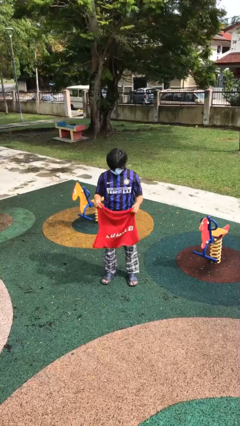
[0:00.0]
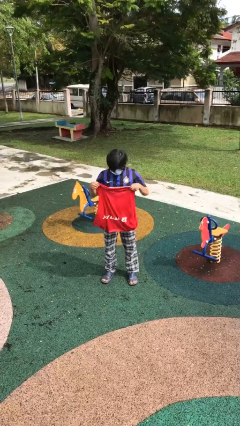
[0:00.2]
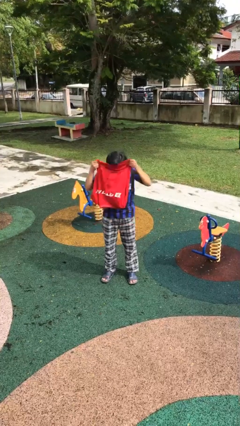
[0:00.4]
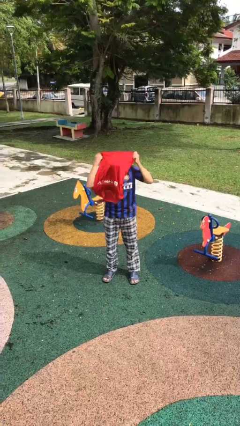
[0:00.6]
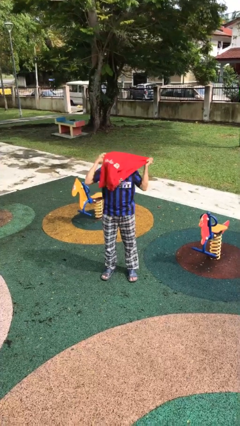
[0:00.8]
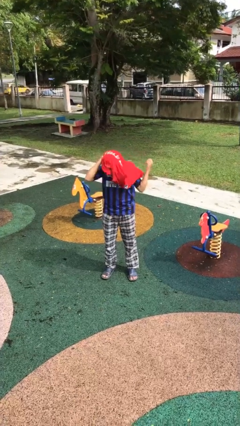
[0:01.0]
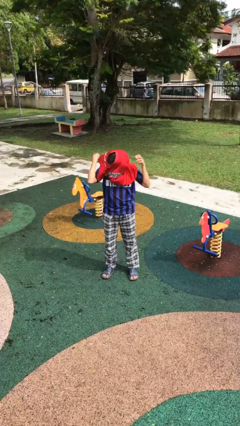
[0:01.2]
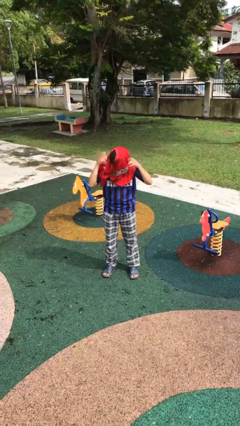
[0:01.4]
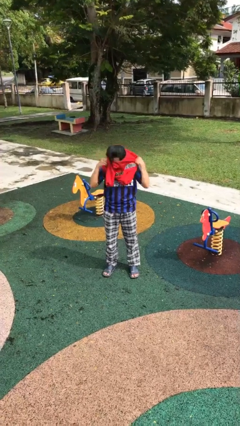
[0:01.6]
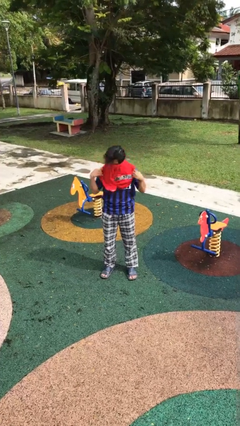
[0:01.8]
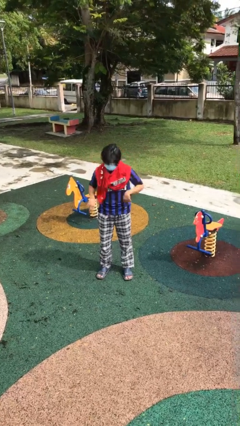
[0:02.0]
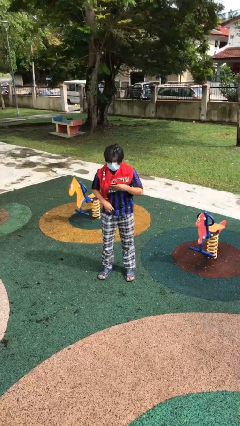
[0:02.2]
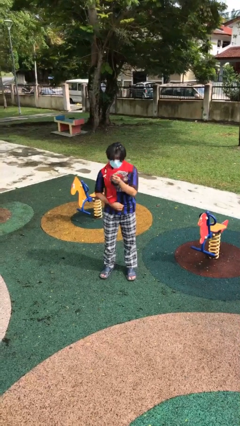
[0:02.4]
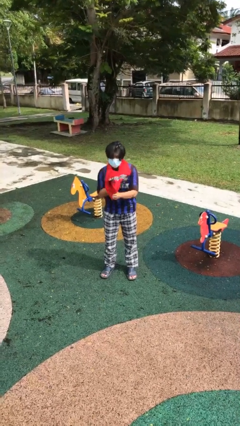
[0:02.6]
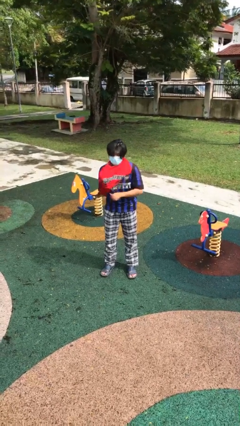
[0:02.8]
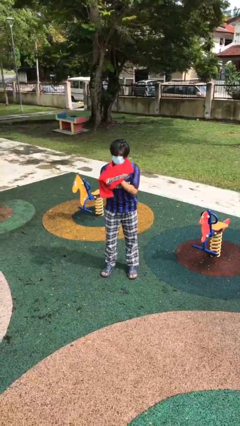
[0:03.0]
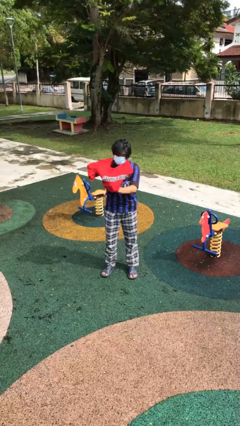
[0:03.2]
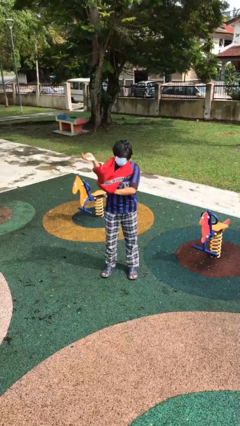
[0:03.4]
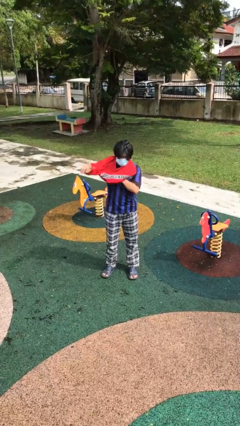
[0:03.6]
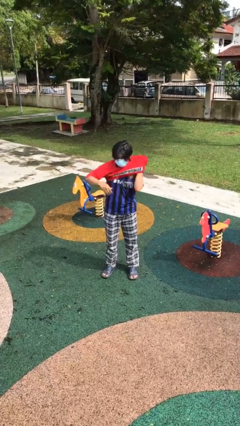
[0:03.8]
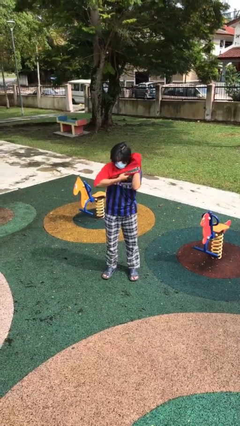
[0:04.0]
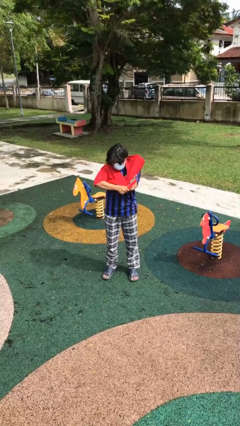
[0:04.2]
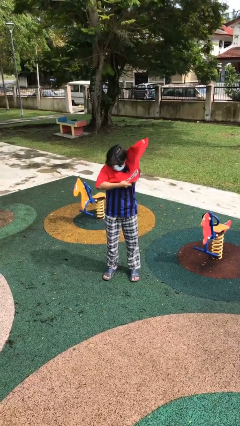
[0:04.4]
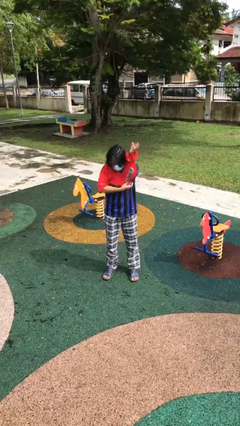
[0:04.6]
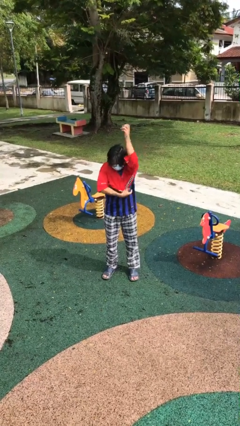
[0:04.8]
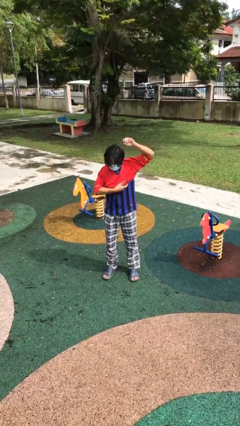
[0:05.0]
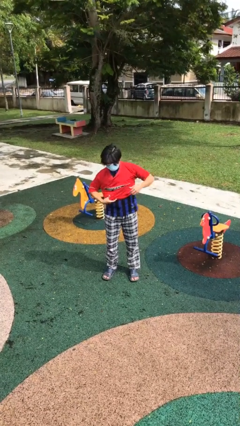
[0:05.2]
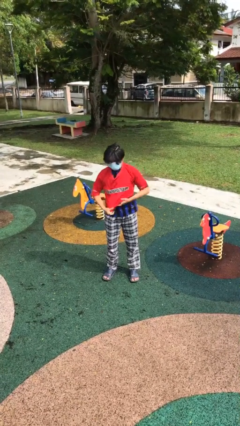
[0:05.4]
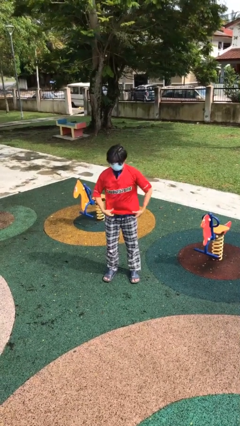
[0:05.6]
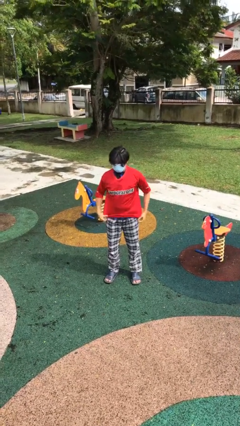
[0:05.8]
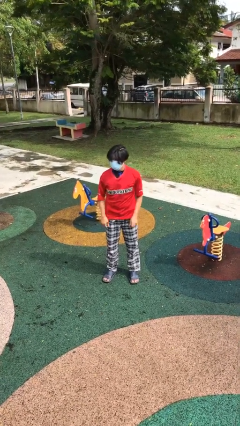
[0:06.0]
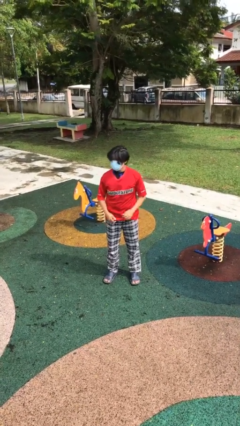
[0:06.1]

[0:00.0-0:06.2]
person puts on shirt

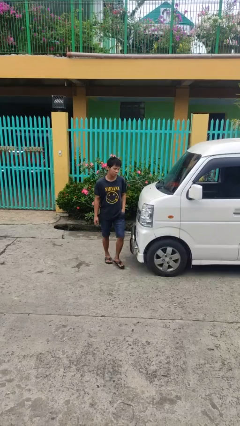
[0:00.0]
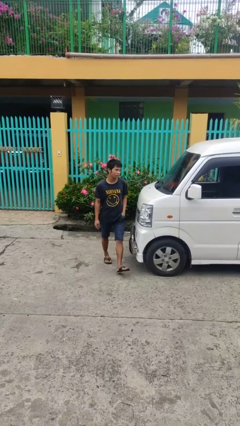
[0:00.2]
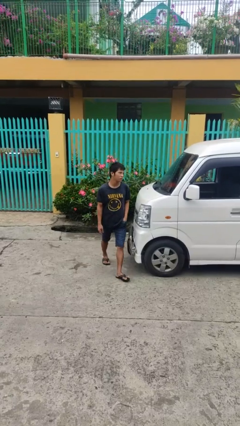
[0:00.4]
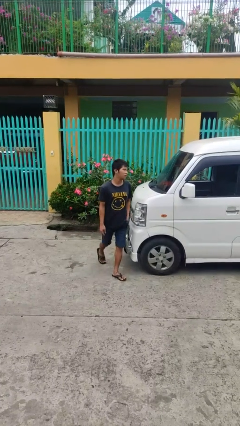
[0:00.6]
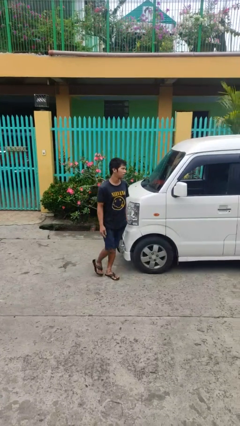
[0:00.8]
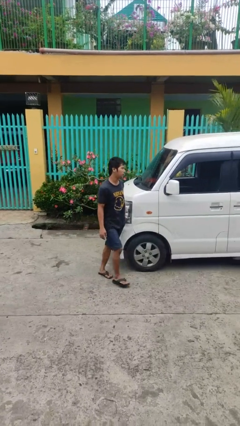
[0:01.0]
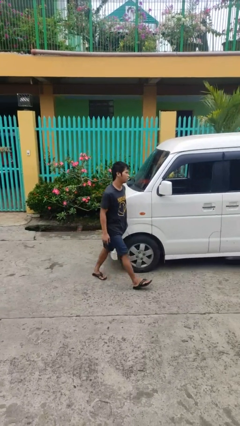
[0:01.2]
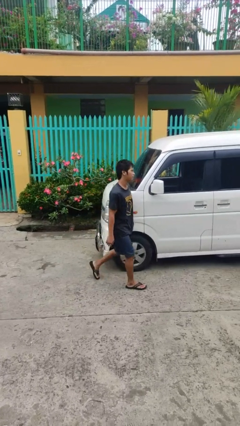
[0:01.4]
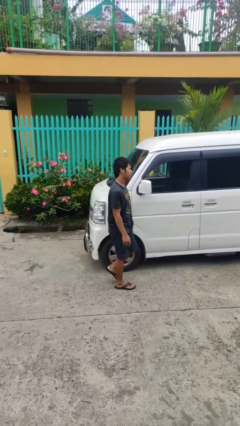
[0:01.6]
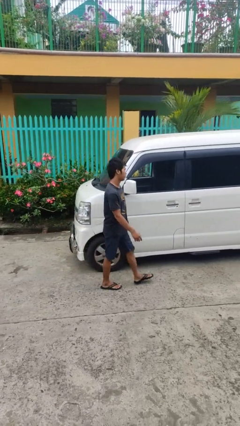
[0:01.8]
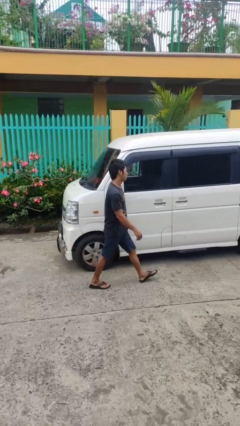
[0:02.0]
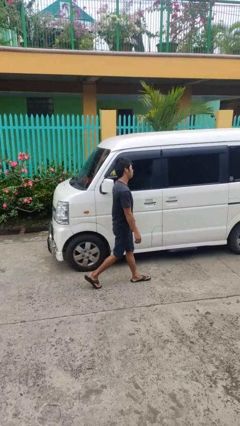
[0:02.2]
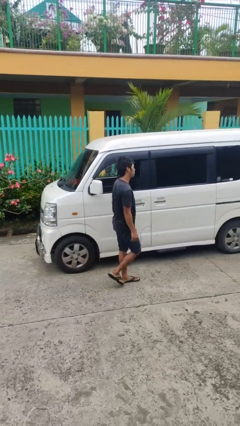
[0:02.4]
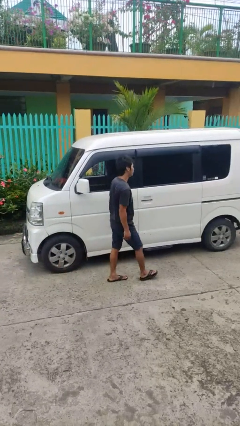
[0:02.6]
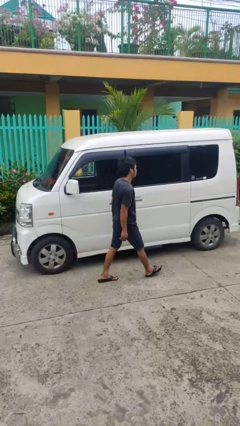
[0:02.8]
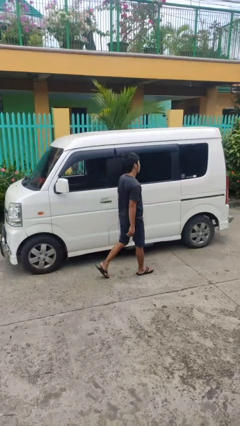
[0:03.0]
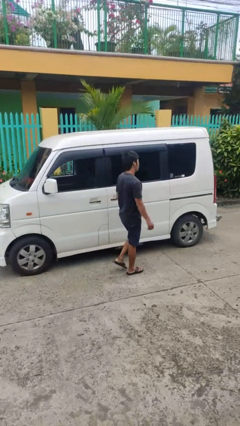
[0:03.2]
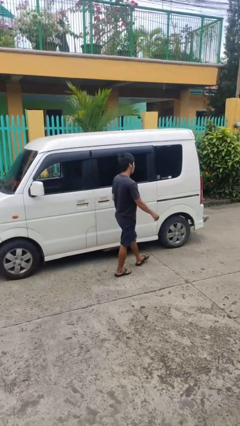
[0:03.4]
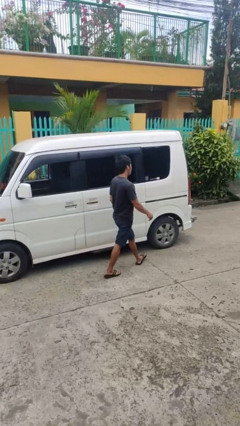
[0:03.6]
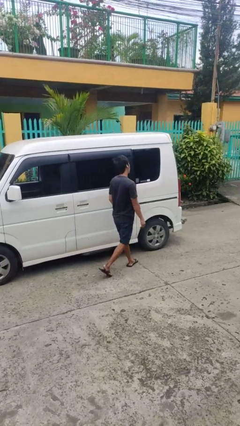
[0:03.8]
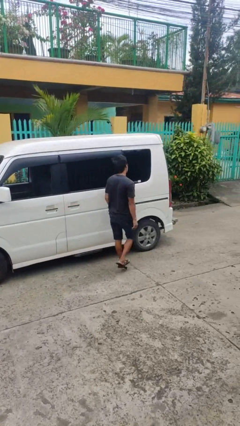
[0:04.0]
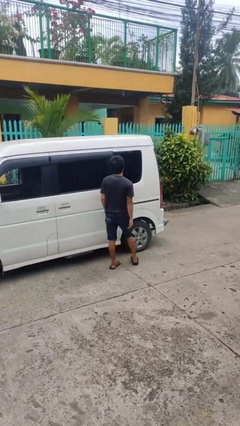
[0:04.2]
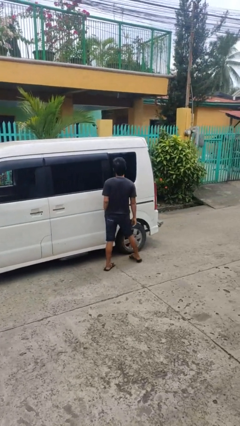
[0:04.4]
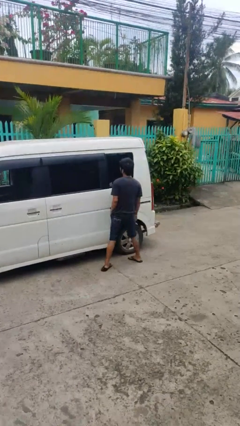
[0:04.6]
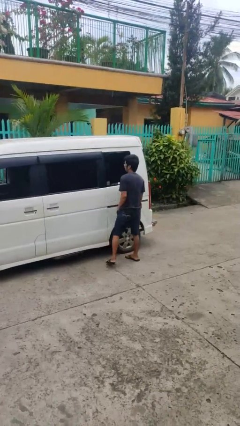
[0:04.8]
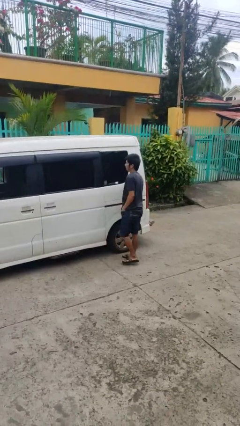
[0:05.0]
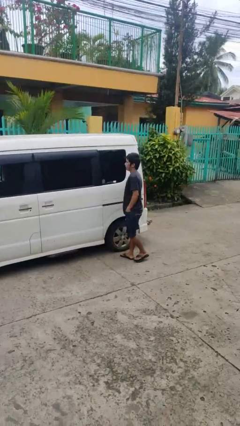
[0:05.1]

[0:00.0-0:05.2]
person walks around car

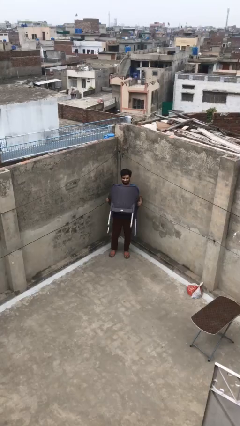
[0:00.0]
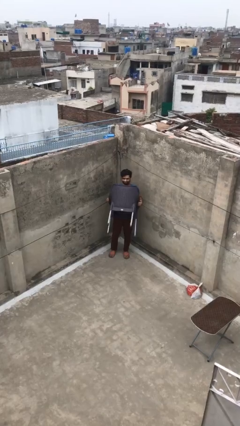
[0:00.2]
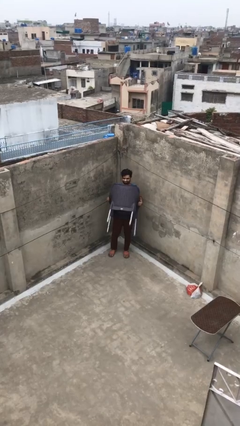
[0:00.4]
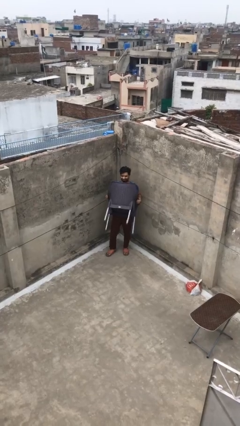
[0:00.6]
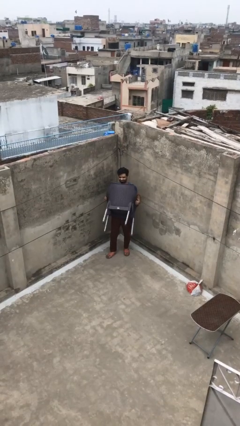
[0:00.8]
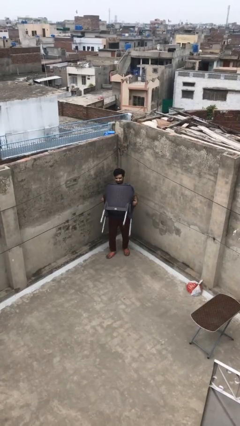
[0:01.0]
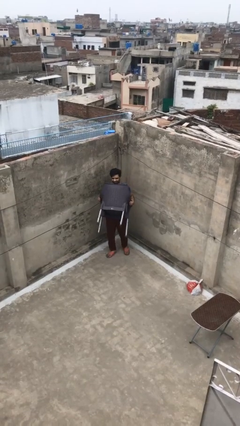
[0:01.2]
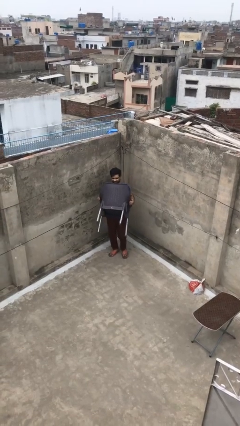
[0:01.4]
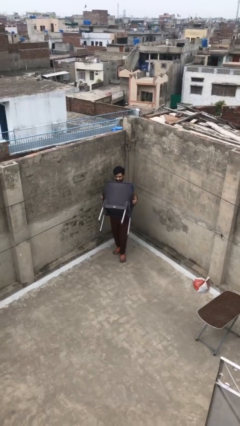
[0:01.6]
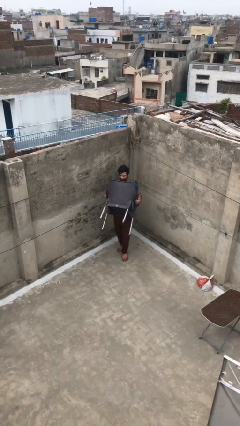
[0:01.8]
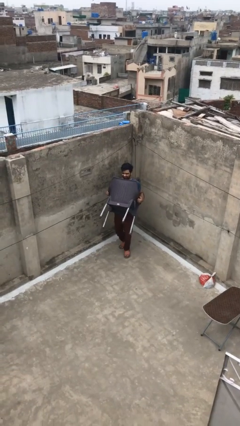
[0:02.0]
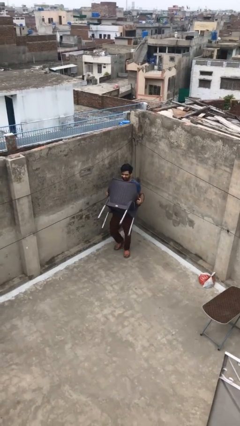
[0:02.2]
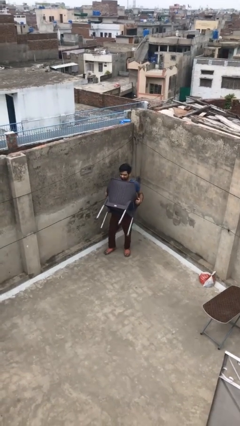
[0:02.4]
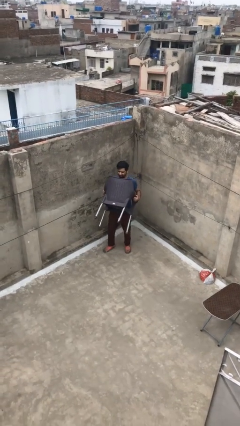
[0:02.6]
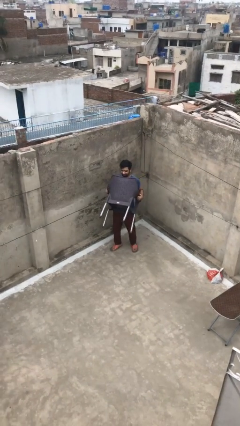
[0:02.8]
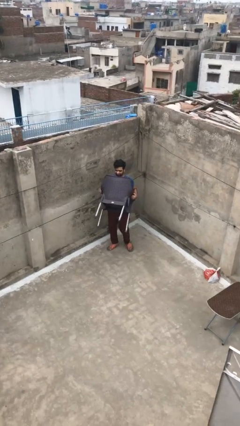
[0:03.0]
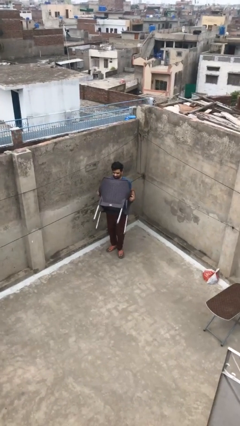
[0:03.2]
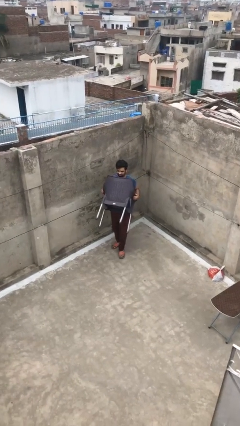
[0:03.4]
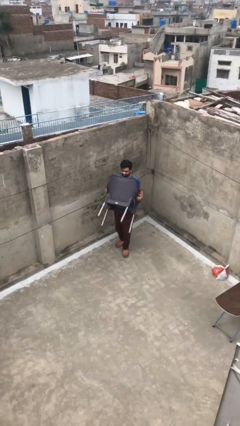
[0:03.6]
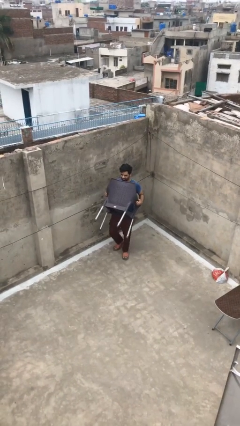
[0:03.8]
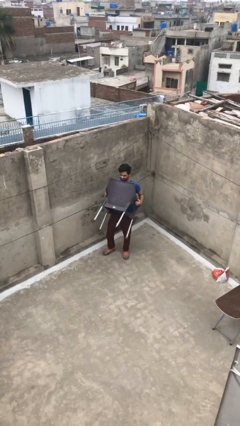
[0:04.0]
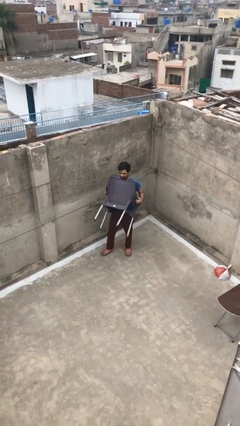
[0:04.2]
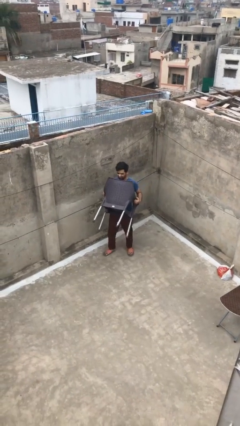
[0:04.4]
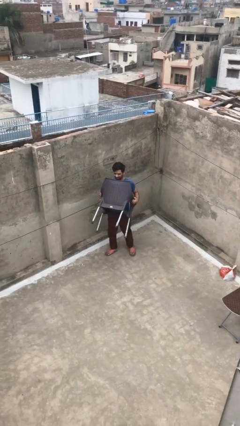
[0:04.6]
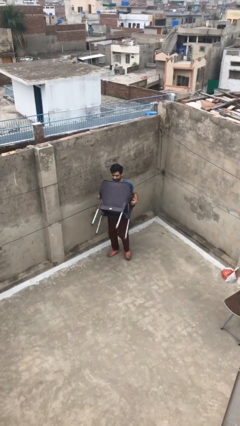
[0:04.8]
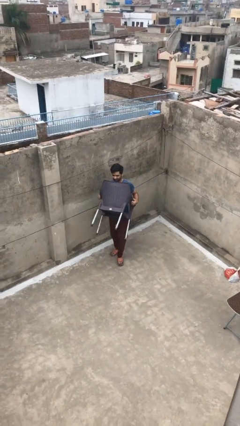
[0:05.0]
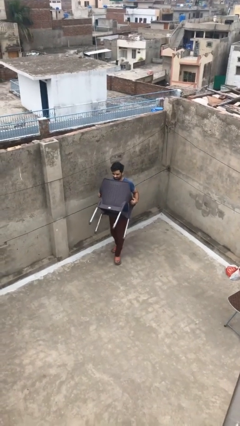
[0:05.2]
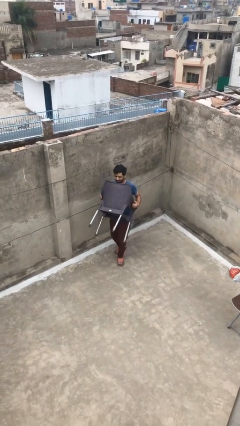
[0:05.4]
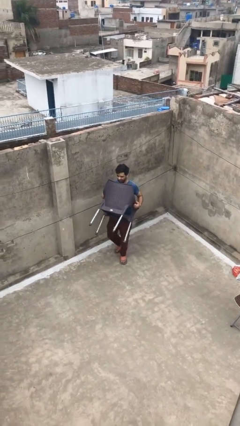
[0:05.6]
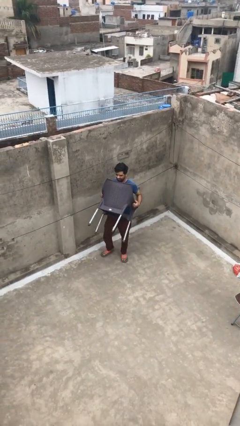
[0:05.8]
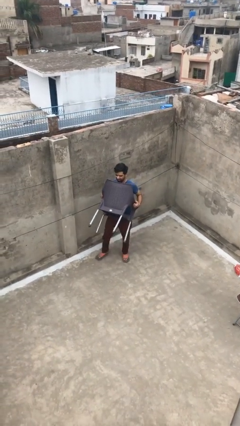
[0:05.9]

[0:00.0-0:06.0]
person carries heavy object
